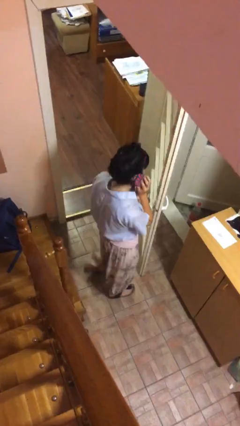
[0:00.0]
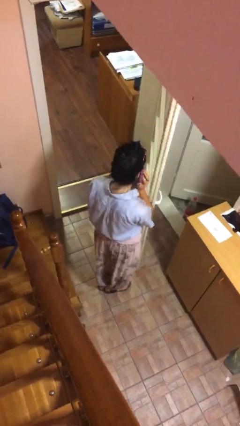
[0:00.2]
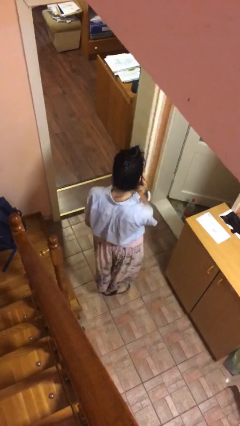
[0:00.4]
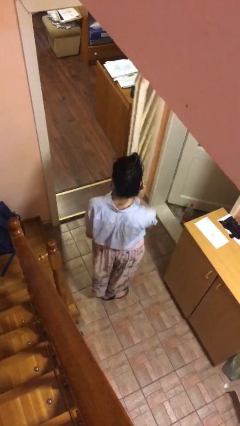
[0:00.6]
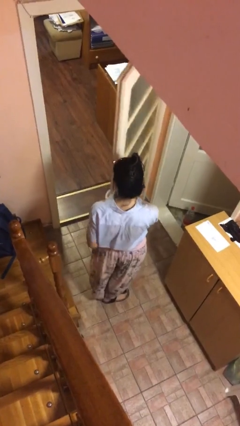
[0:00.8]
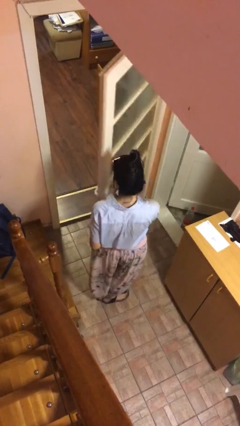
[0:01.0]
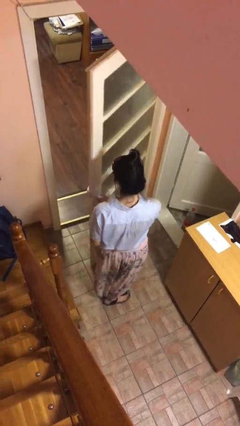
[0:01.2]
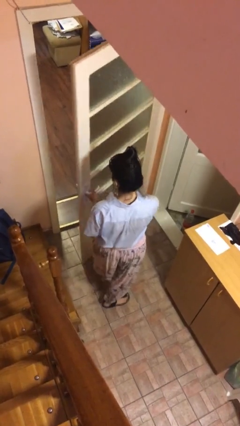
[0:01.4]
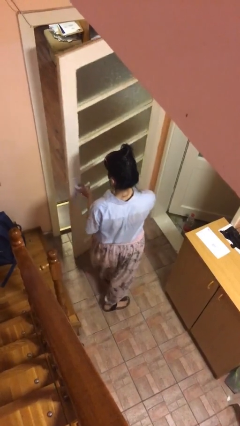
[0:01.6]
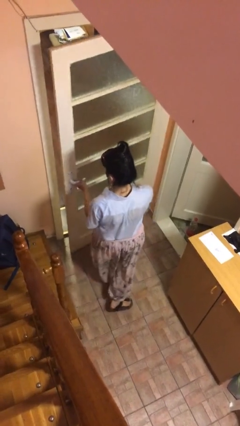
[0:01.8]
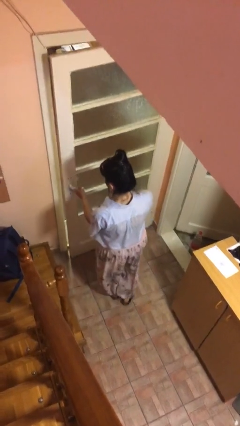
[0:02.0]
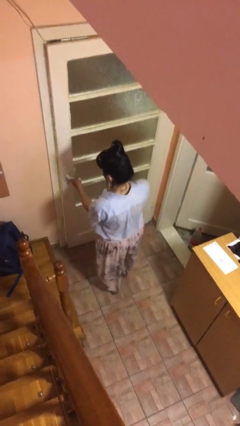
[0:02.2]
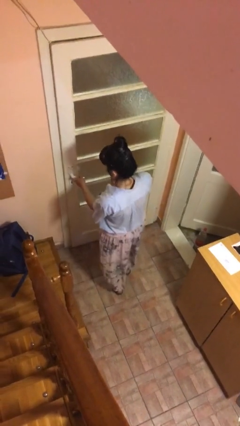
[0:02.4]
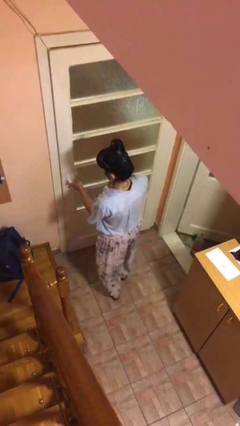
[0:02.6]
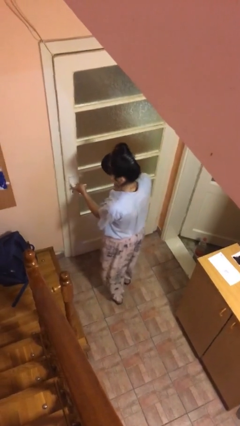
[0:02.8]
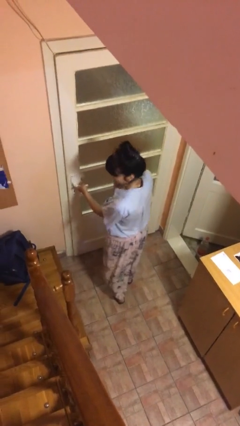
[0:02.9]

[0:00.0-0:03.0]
person closes facility door

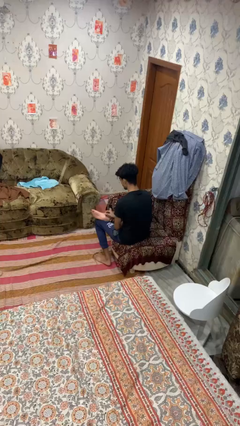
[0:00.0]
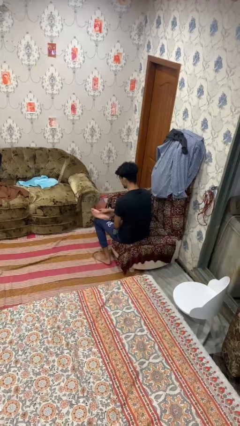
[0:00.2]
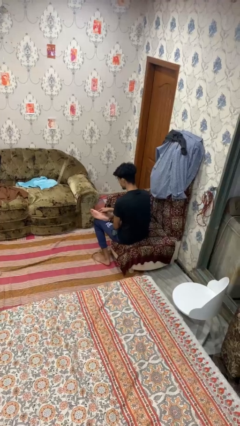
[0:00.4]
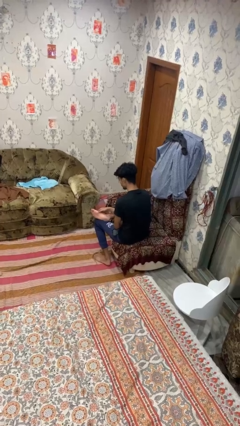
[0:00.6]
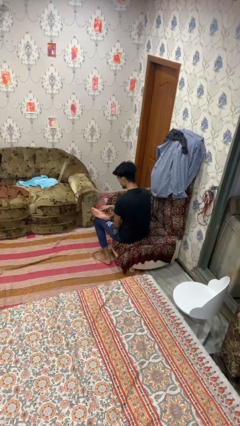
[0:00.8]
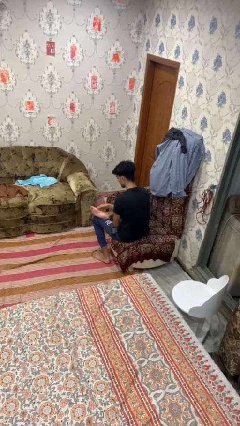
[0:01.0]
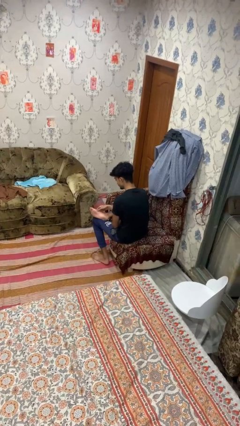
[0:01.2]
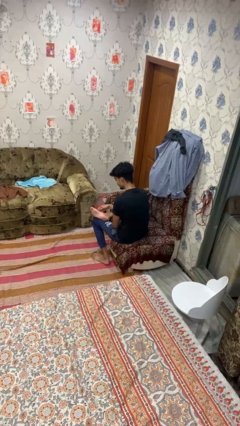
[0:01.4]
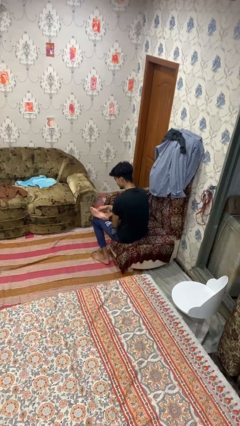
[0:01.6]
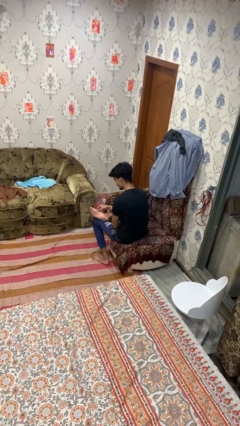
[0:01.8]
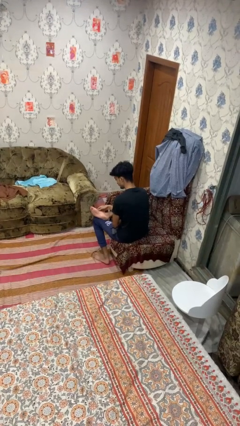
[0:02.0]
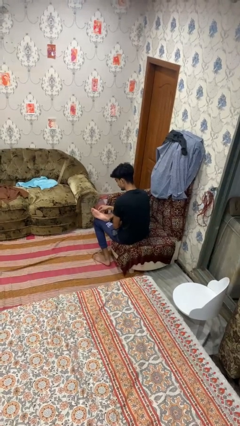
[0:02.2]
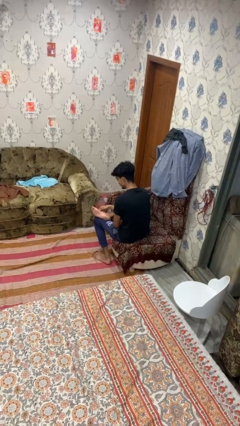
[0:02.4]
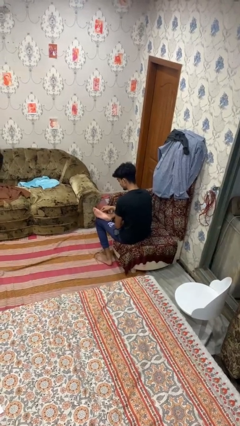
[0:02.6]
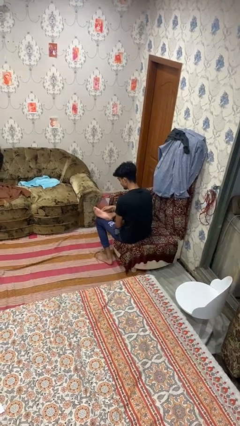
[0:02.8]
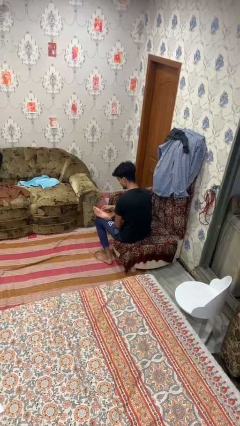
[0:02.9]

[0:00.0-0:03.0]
person rubs foot

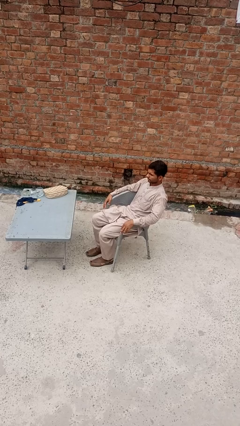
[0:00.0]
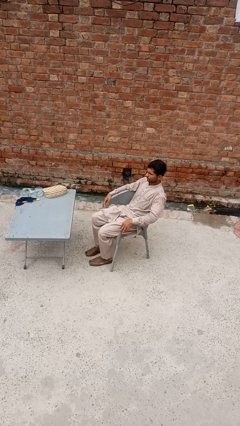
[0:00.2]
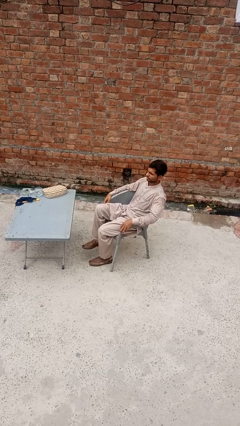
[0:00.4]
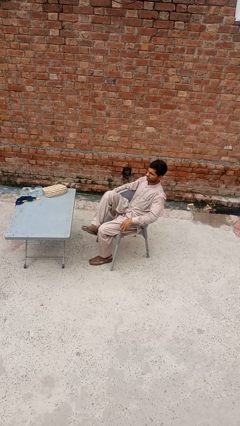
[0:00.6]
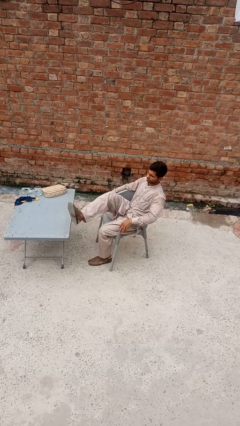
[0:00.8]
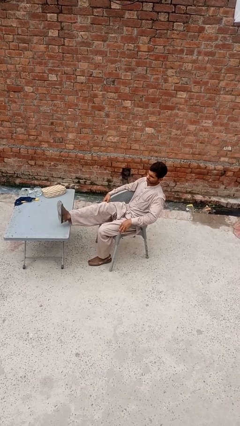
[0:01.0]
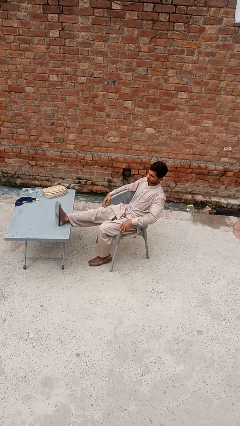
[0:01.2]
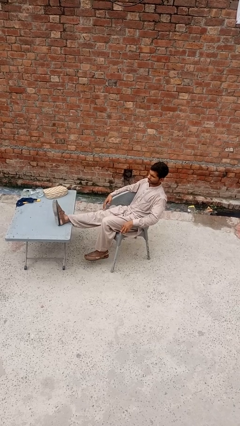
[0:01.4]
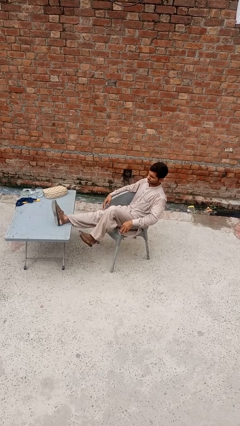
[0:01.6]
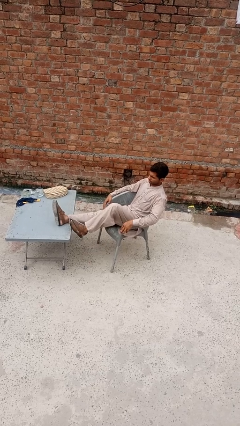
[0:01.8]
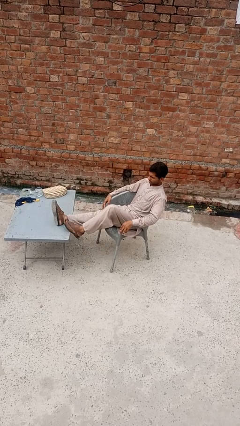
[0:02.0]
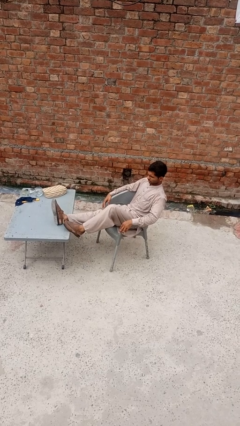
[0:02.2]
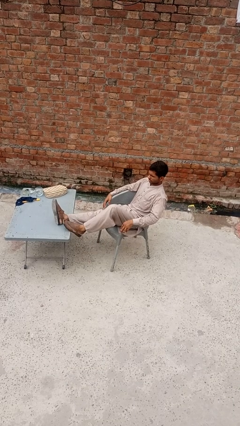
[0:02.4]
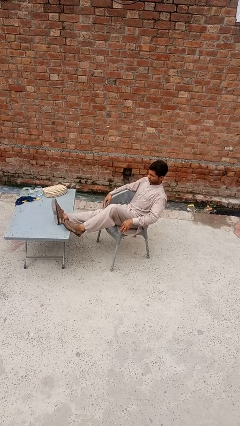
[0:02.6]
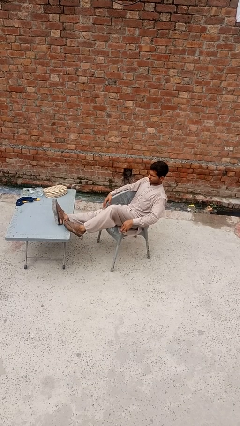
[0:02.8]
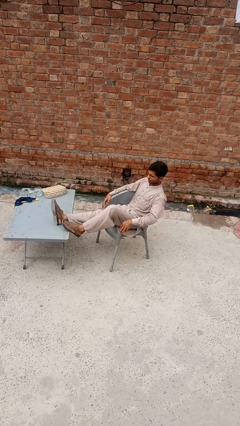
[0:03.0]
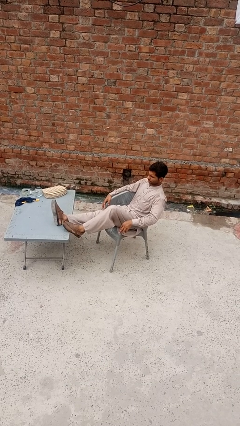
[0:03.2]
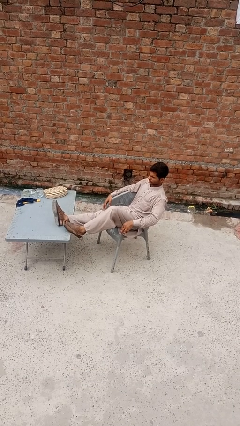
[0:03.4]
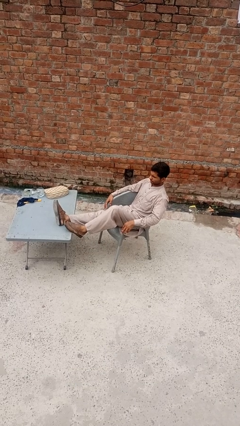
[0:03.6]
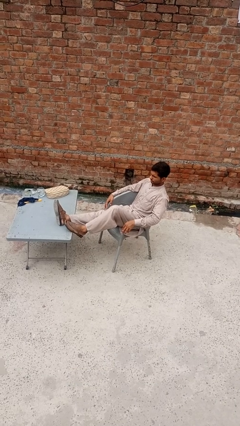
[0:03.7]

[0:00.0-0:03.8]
person puts feet up

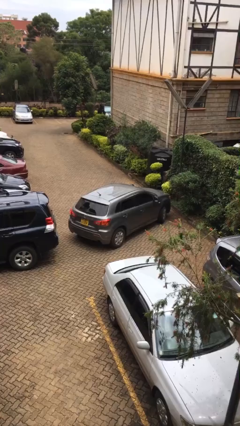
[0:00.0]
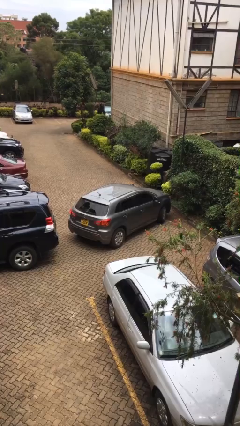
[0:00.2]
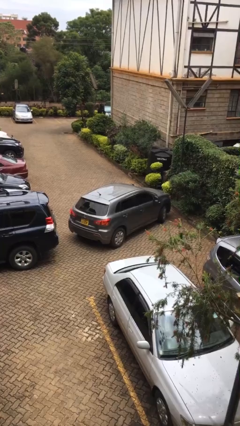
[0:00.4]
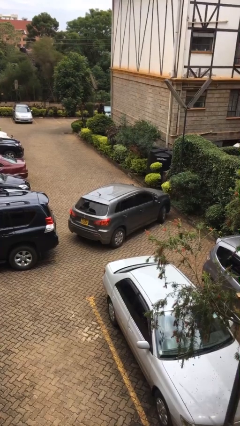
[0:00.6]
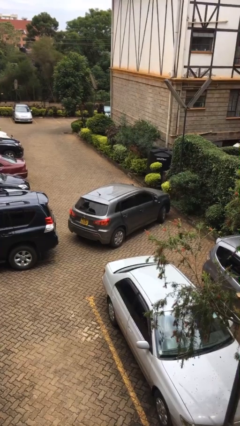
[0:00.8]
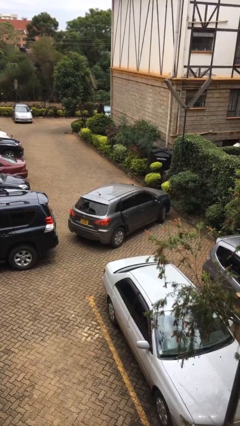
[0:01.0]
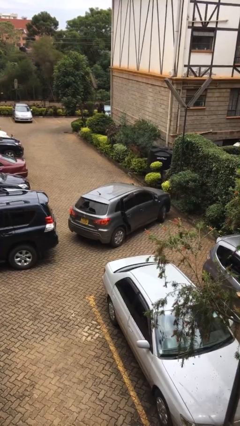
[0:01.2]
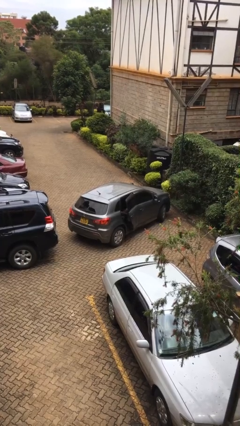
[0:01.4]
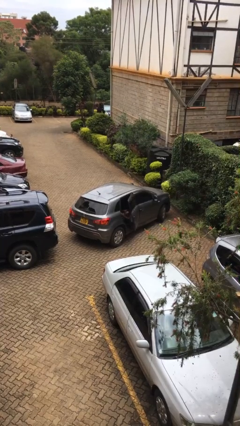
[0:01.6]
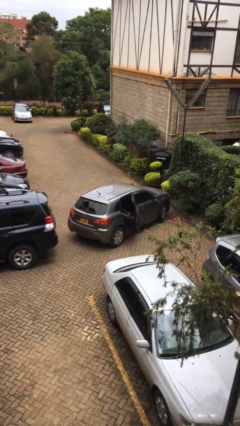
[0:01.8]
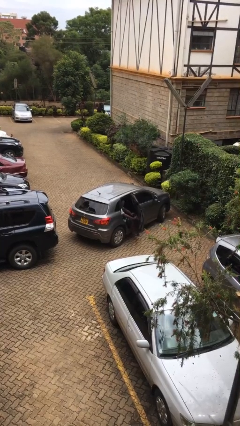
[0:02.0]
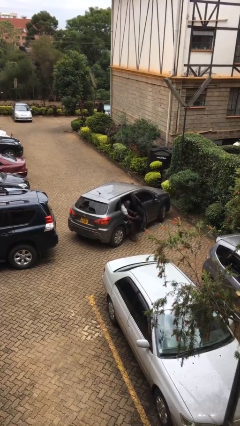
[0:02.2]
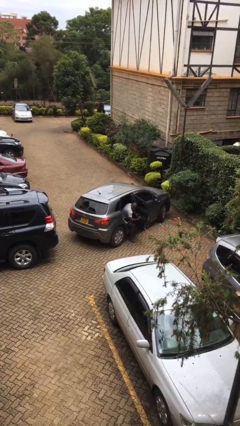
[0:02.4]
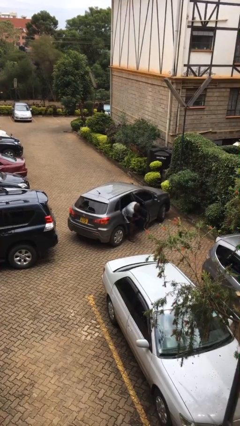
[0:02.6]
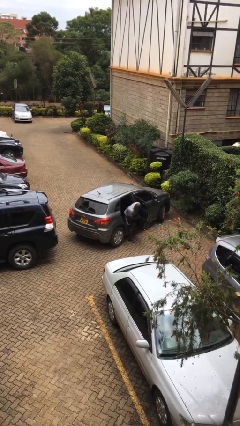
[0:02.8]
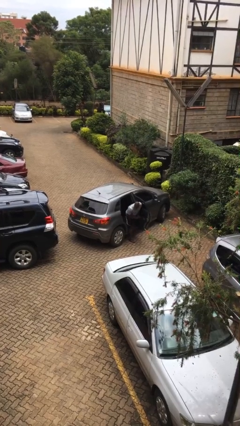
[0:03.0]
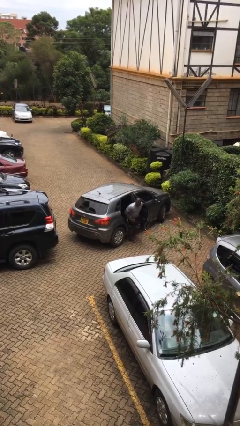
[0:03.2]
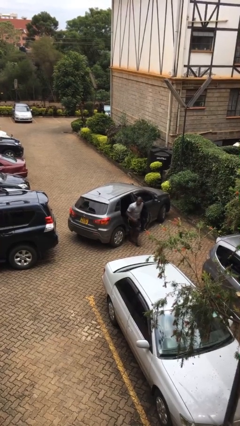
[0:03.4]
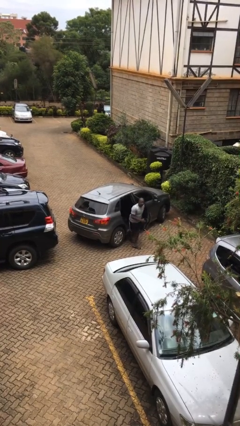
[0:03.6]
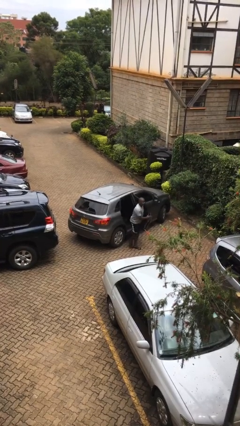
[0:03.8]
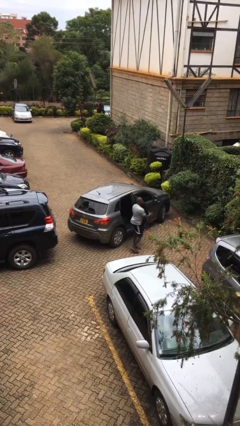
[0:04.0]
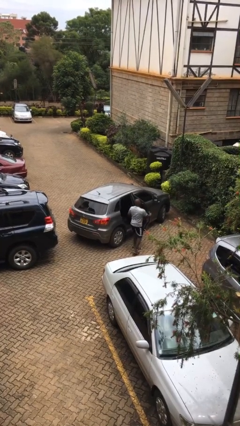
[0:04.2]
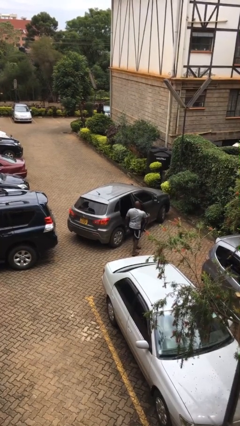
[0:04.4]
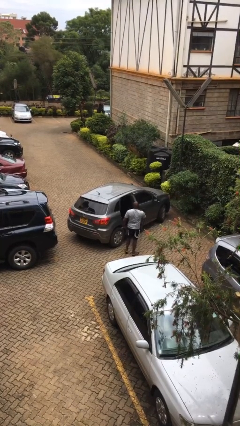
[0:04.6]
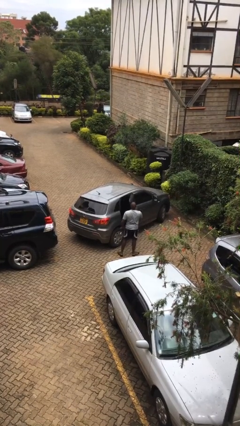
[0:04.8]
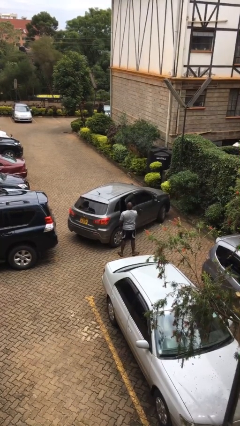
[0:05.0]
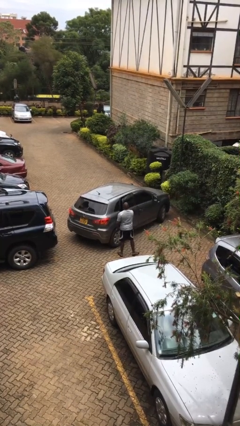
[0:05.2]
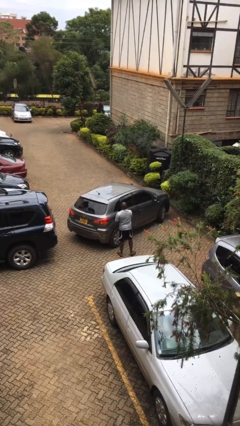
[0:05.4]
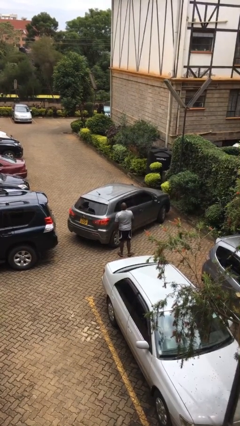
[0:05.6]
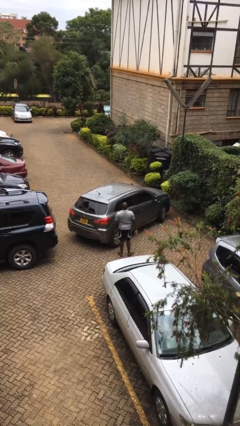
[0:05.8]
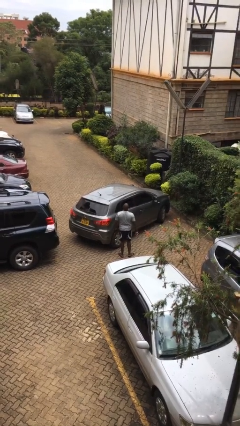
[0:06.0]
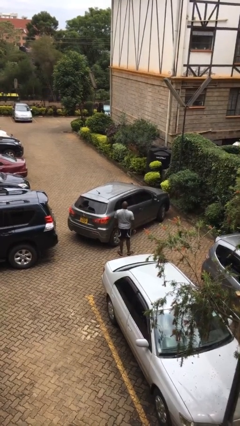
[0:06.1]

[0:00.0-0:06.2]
car drops off person

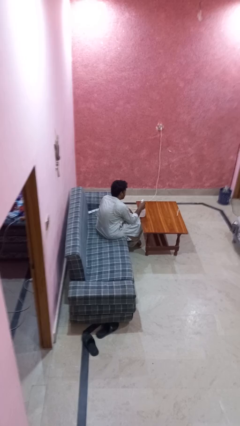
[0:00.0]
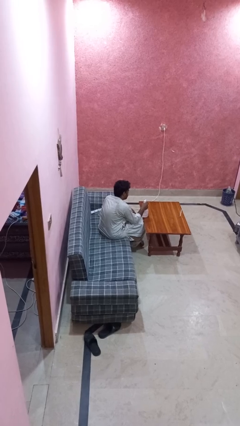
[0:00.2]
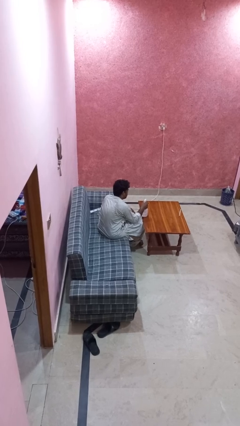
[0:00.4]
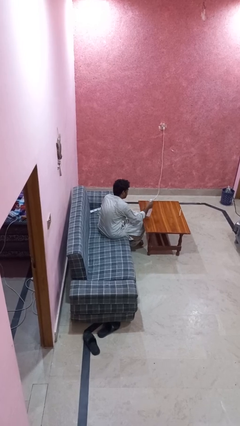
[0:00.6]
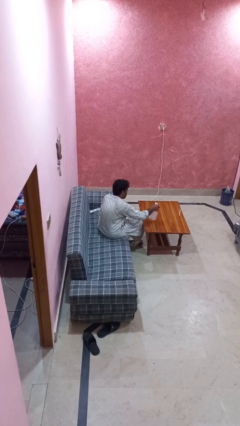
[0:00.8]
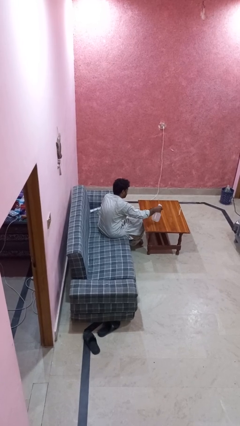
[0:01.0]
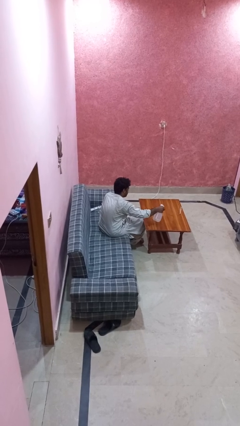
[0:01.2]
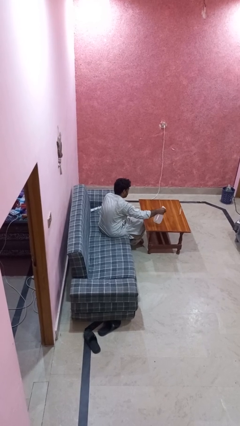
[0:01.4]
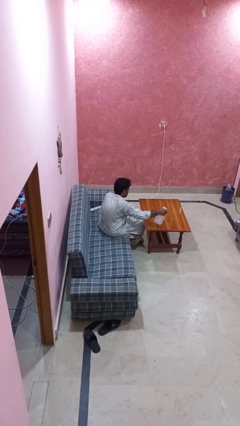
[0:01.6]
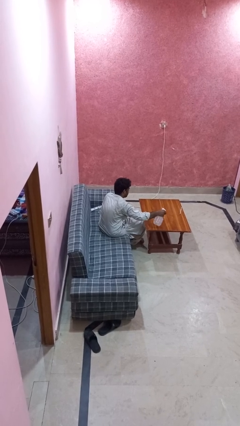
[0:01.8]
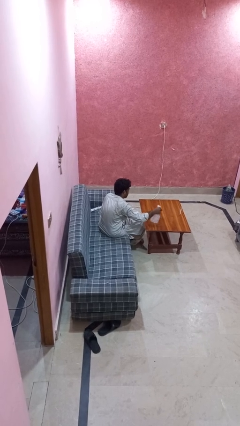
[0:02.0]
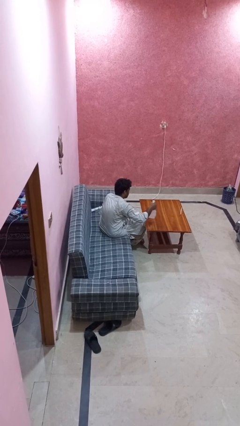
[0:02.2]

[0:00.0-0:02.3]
person sprays from bottle
